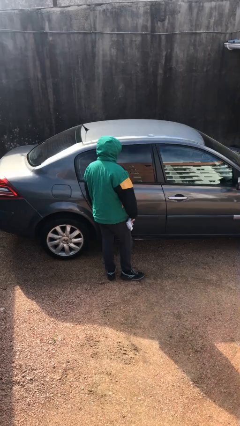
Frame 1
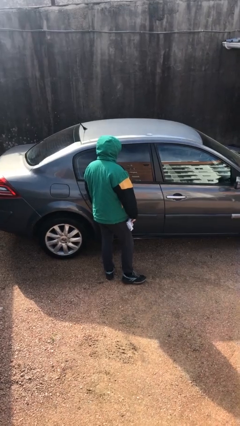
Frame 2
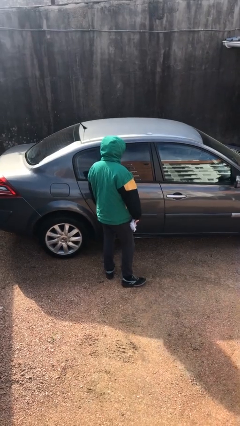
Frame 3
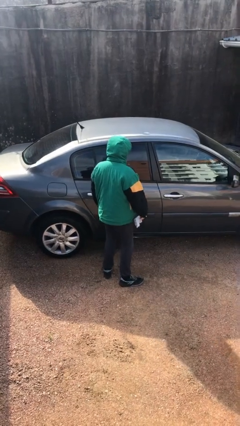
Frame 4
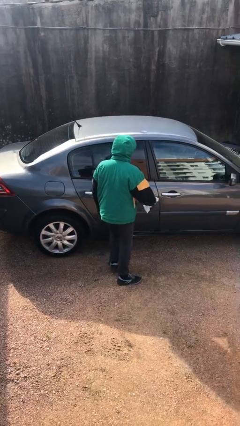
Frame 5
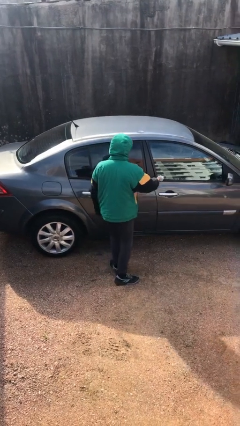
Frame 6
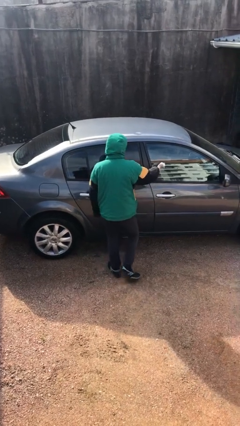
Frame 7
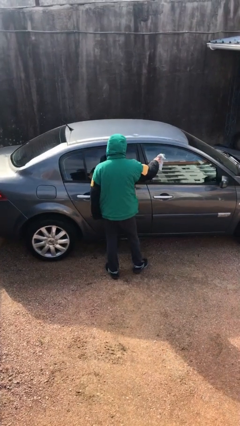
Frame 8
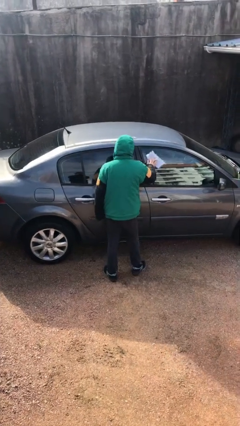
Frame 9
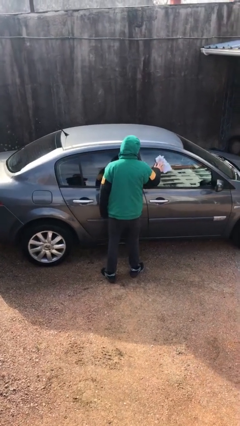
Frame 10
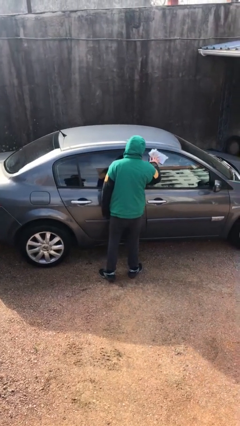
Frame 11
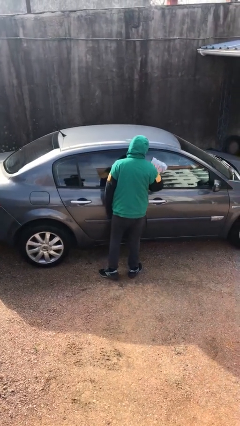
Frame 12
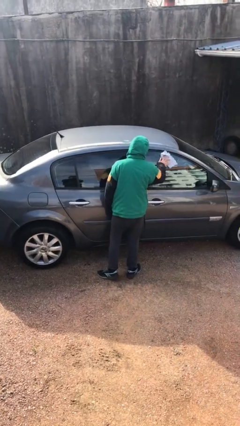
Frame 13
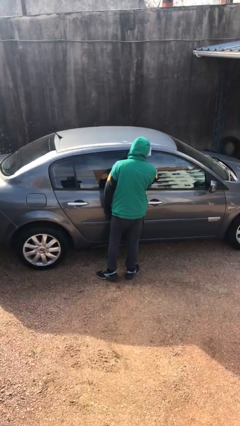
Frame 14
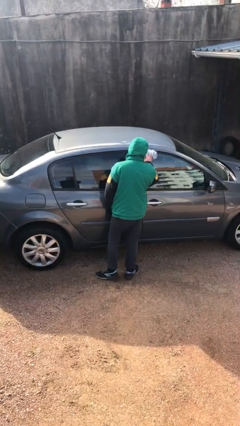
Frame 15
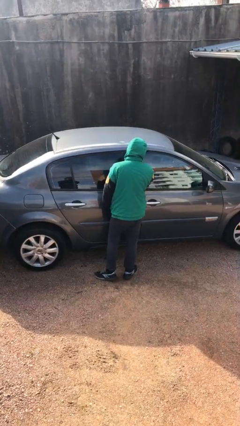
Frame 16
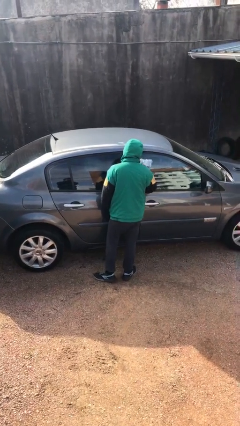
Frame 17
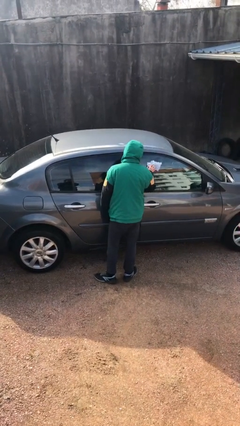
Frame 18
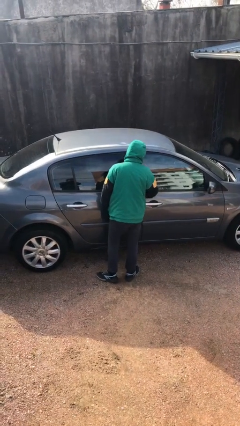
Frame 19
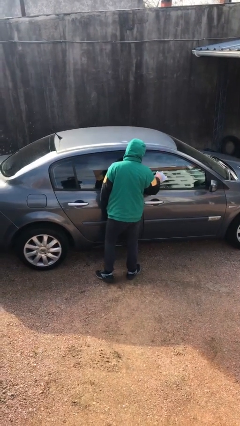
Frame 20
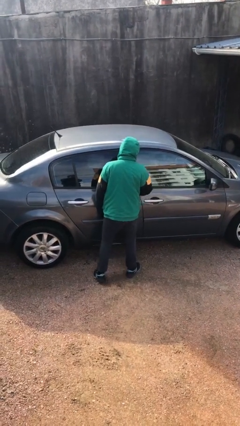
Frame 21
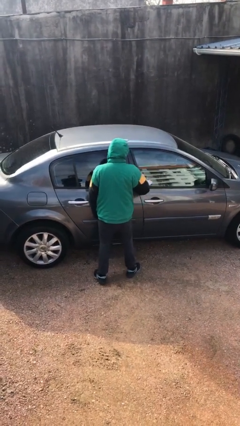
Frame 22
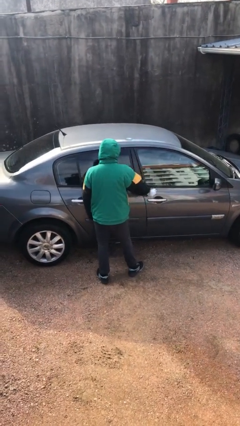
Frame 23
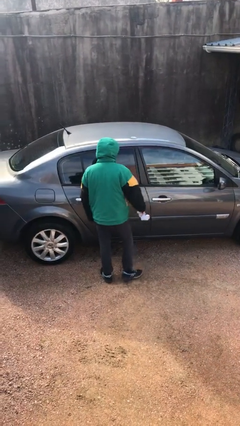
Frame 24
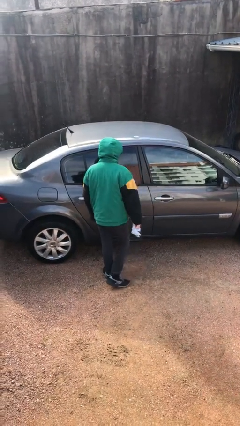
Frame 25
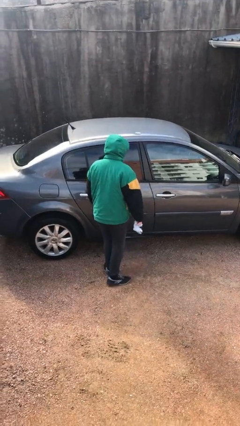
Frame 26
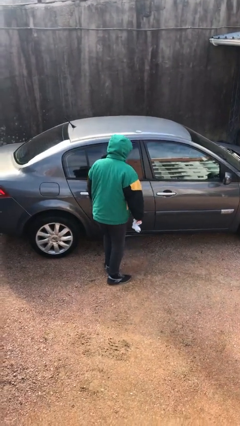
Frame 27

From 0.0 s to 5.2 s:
person polishes car with rag

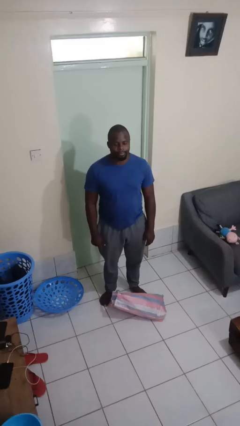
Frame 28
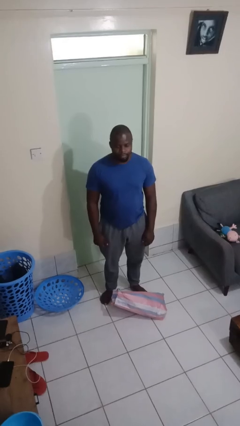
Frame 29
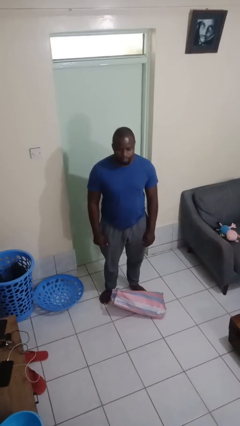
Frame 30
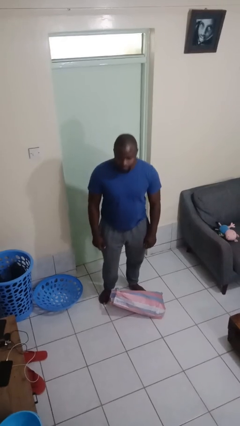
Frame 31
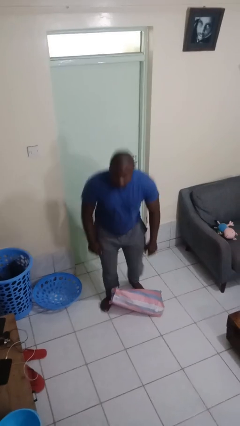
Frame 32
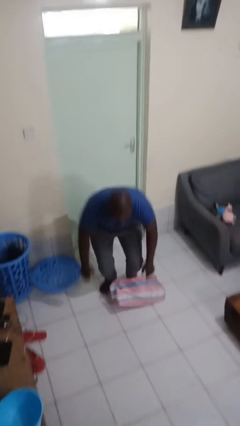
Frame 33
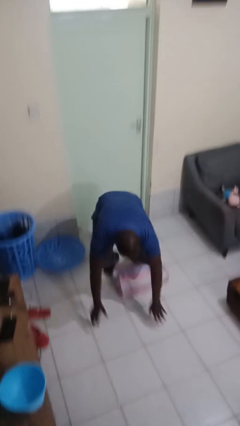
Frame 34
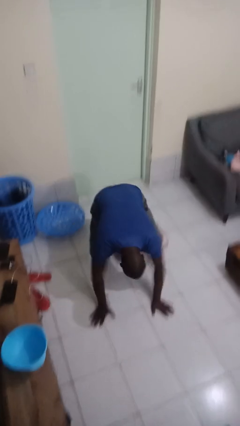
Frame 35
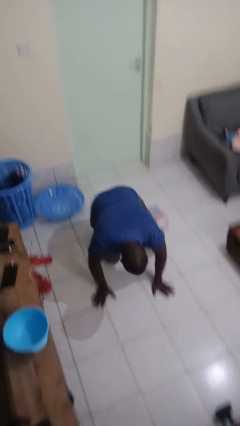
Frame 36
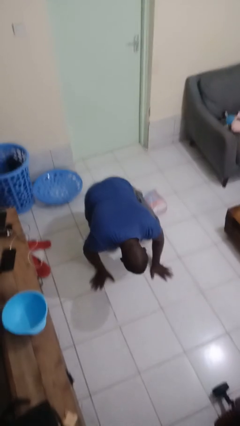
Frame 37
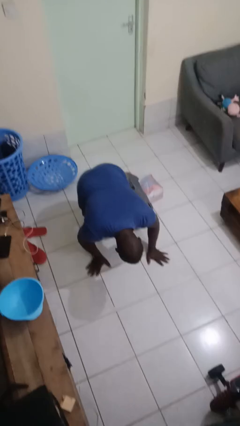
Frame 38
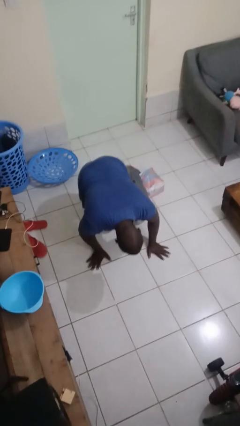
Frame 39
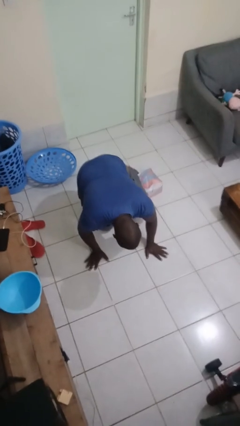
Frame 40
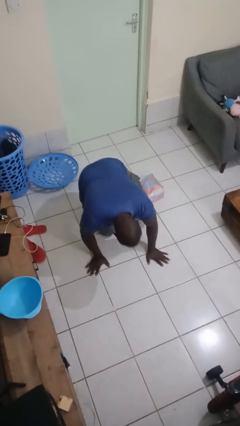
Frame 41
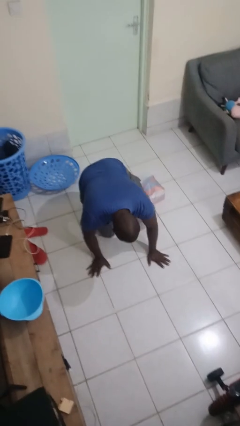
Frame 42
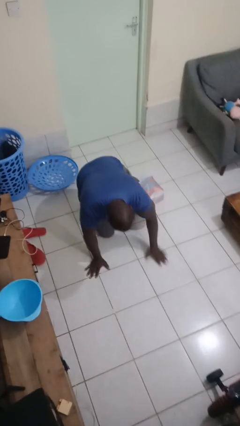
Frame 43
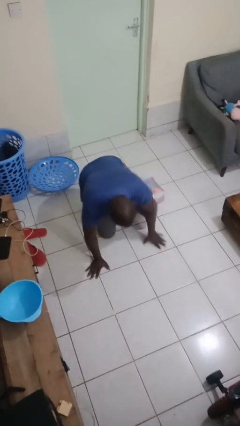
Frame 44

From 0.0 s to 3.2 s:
person trips on object on floor

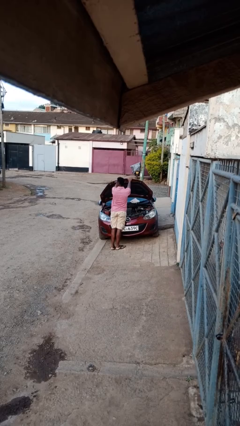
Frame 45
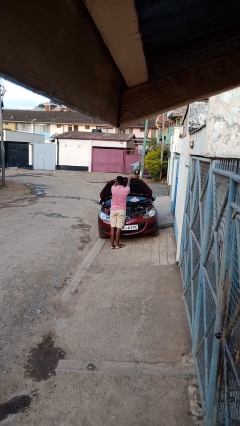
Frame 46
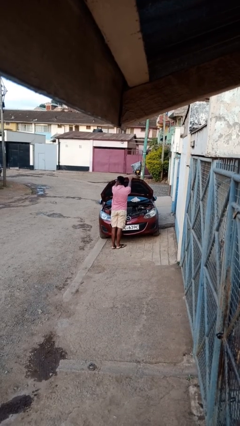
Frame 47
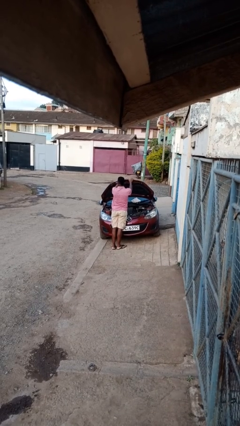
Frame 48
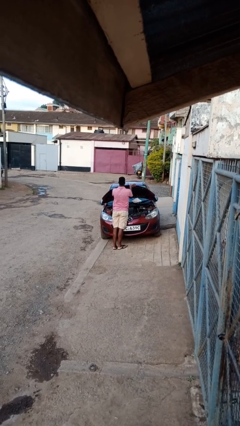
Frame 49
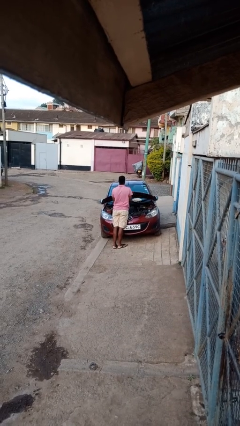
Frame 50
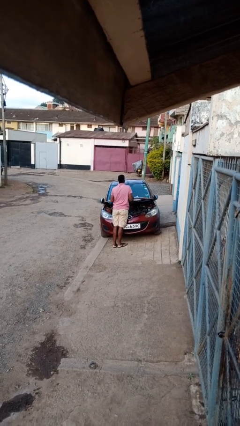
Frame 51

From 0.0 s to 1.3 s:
person closes car hood

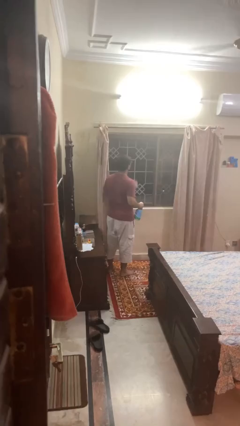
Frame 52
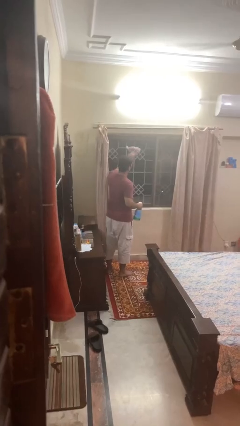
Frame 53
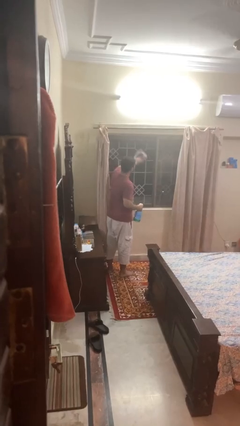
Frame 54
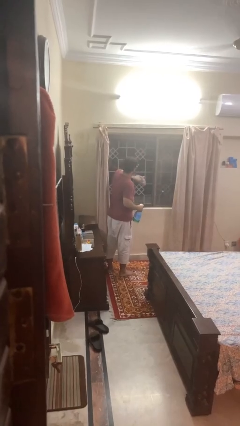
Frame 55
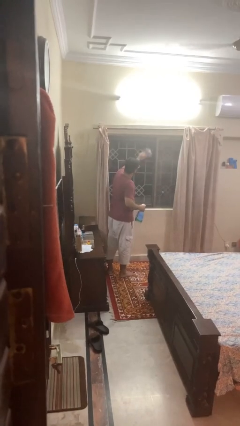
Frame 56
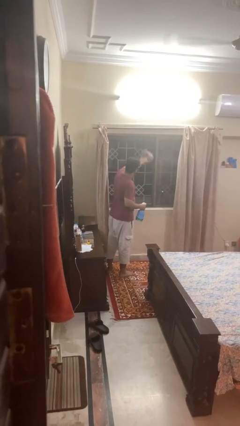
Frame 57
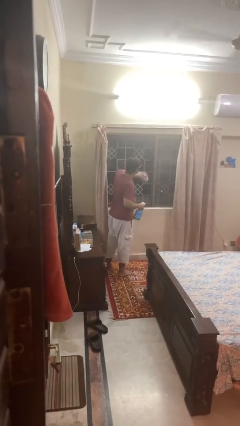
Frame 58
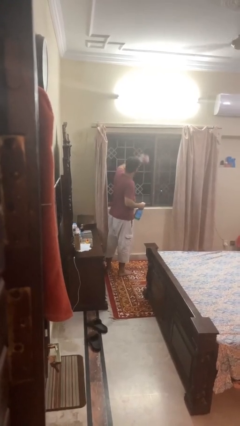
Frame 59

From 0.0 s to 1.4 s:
person washes window

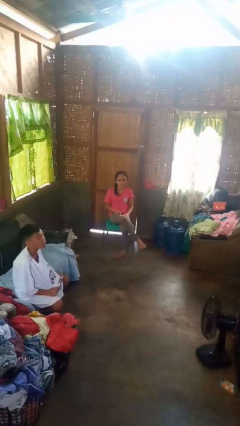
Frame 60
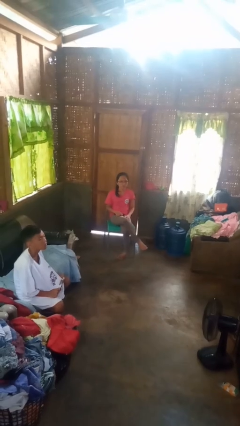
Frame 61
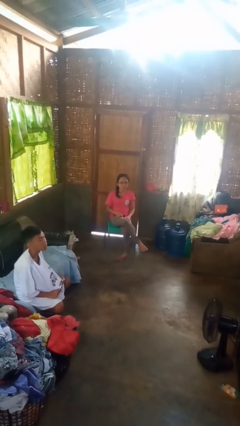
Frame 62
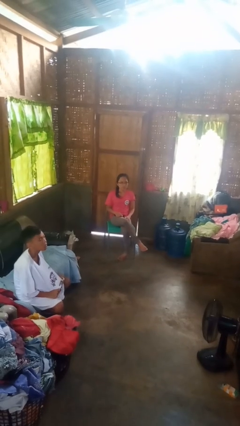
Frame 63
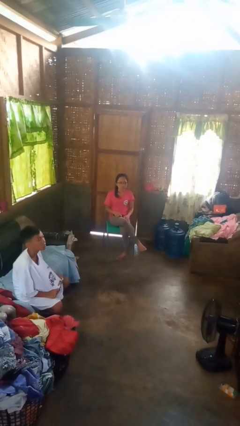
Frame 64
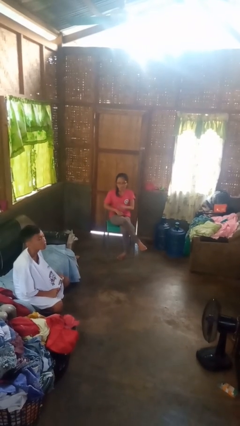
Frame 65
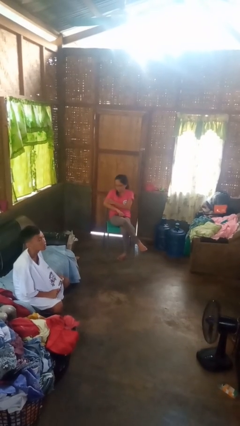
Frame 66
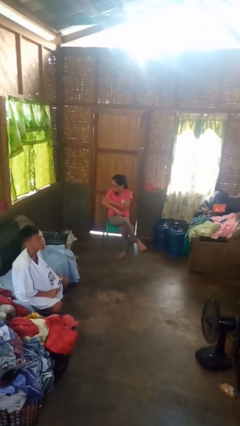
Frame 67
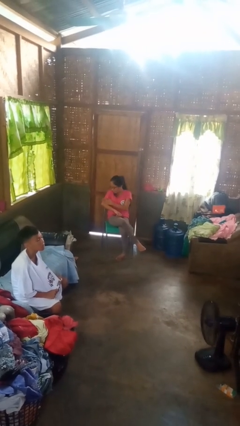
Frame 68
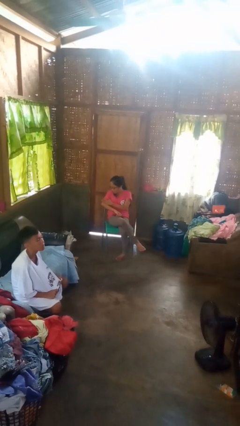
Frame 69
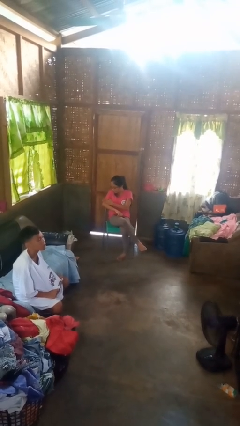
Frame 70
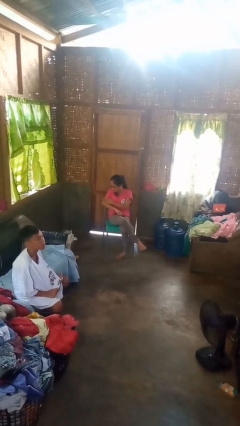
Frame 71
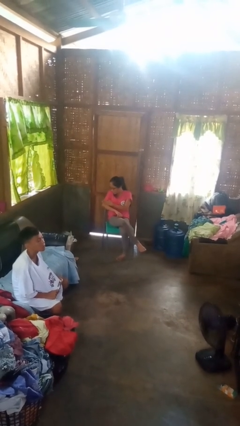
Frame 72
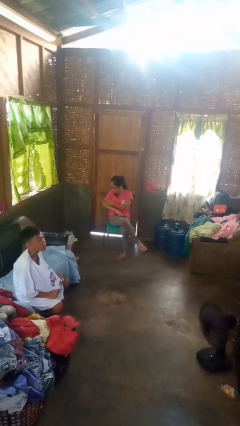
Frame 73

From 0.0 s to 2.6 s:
person swats bug

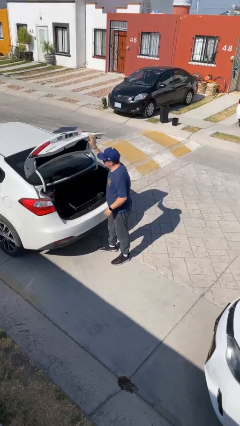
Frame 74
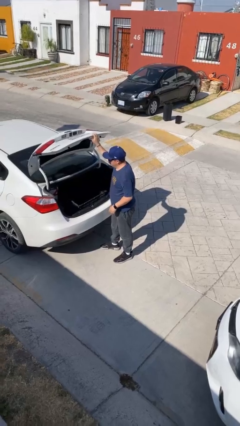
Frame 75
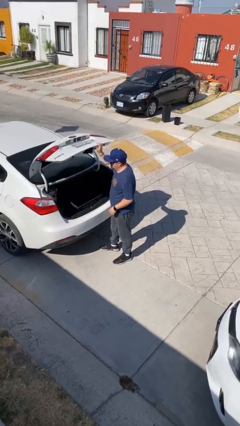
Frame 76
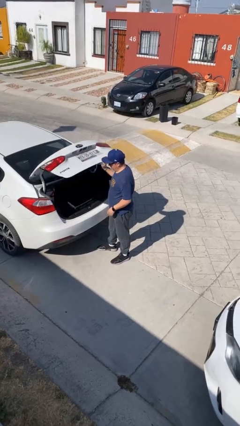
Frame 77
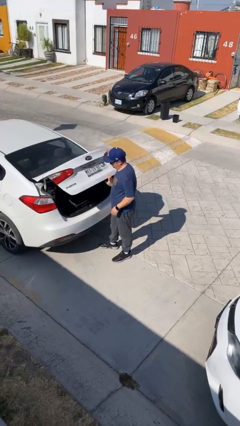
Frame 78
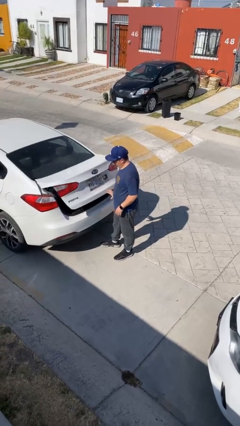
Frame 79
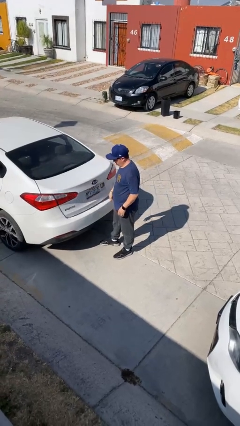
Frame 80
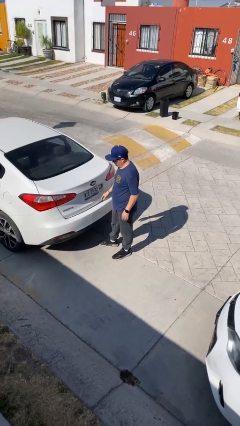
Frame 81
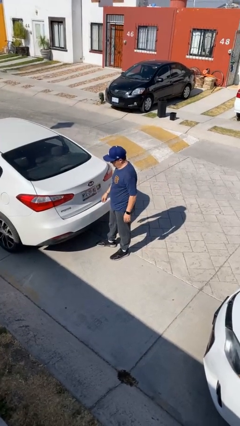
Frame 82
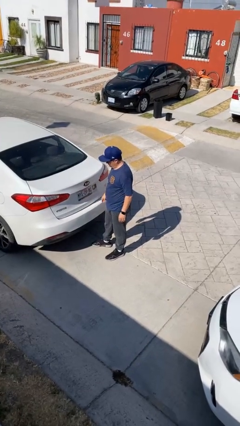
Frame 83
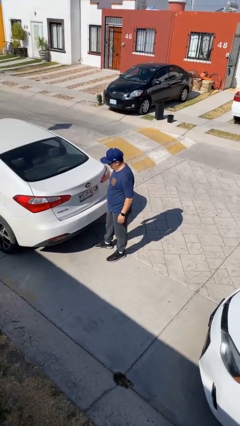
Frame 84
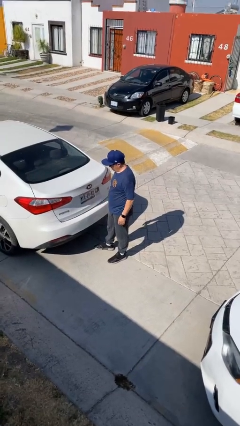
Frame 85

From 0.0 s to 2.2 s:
person closes car trunk

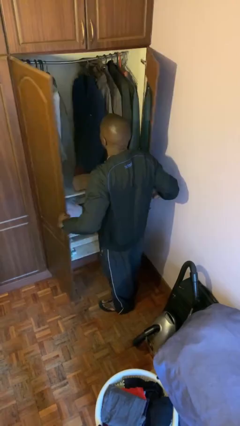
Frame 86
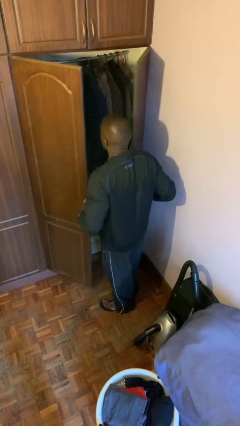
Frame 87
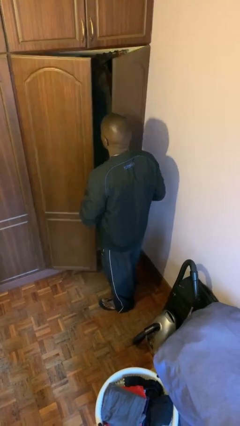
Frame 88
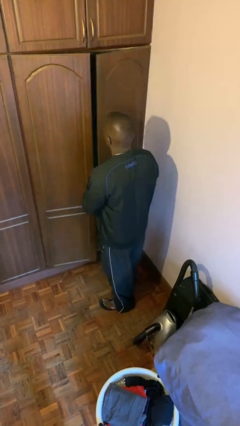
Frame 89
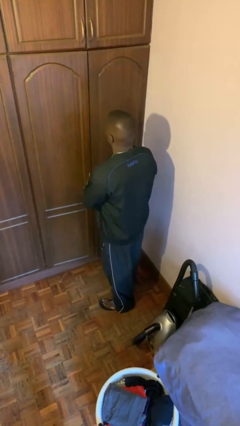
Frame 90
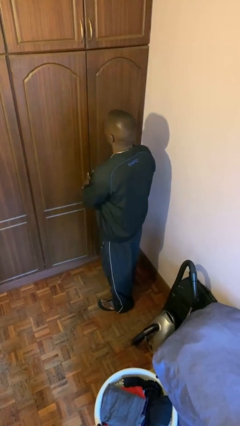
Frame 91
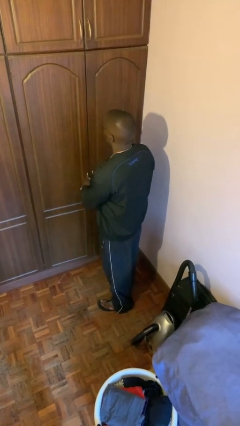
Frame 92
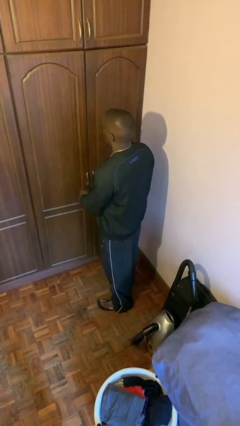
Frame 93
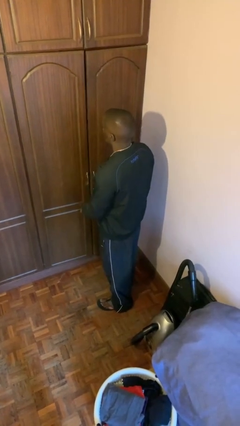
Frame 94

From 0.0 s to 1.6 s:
person closes closet door
